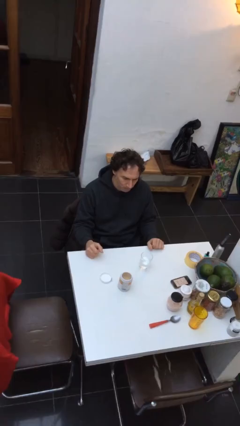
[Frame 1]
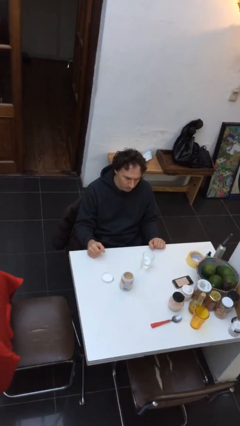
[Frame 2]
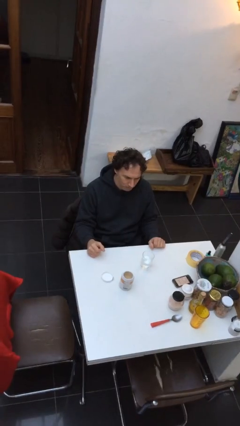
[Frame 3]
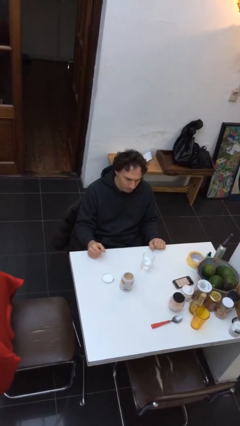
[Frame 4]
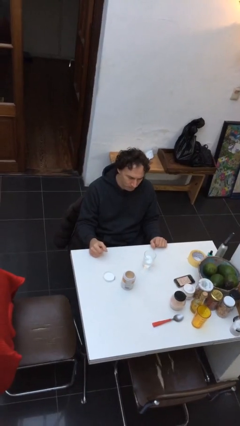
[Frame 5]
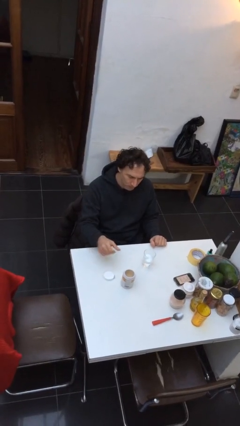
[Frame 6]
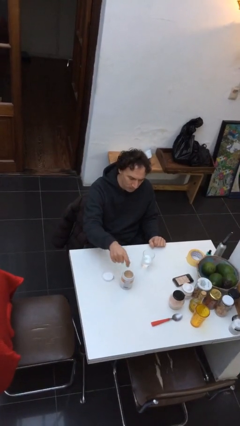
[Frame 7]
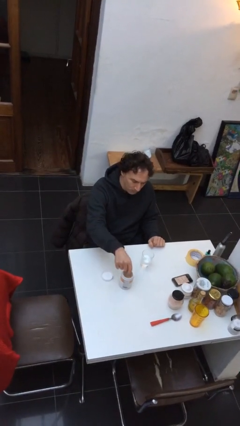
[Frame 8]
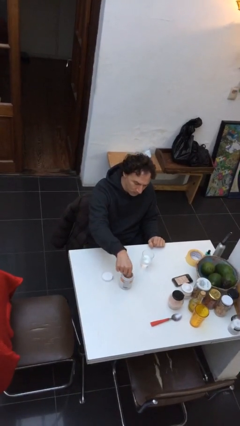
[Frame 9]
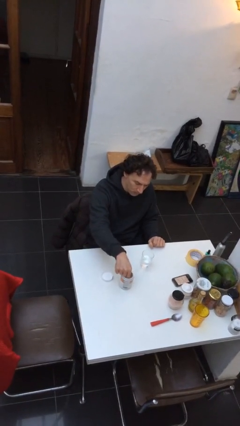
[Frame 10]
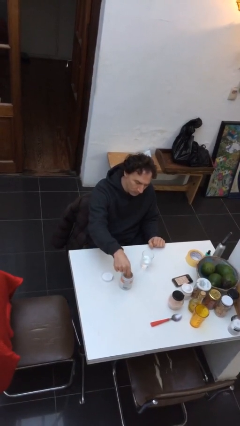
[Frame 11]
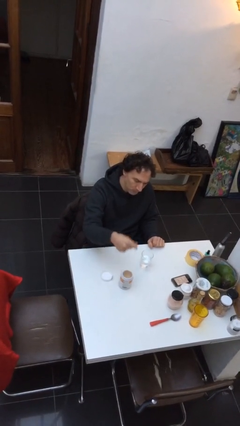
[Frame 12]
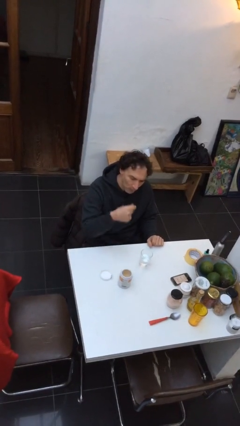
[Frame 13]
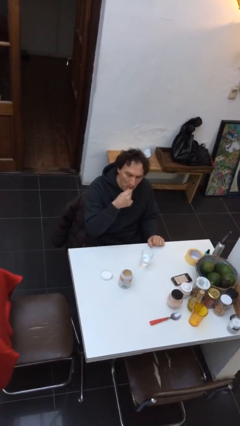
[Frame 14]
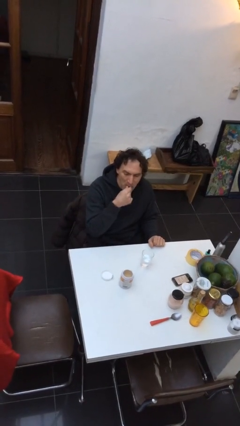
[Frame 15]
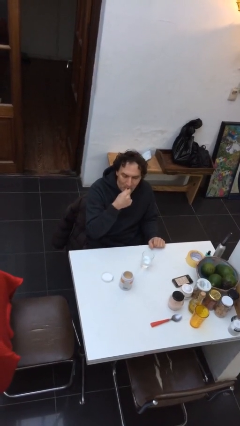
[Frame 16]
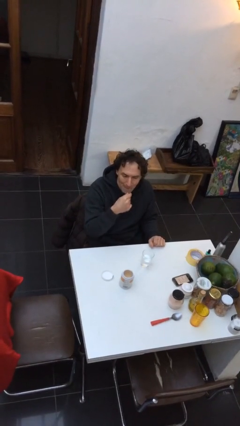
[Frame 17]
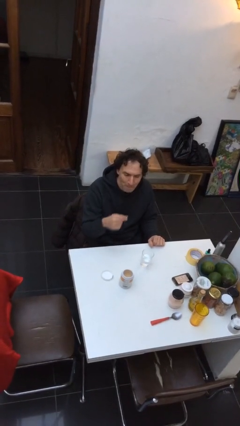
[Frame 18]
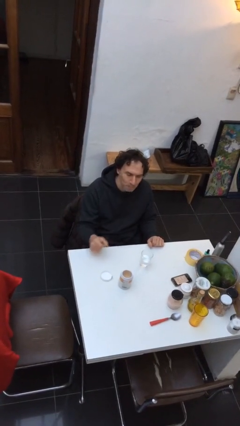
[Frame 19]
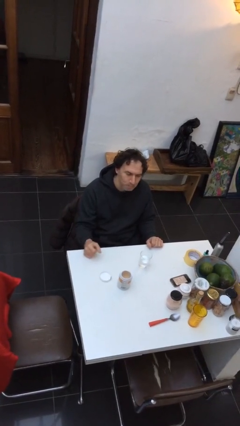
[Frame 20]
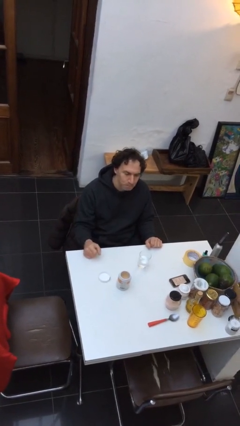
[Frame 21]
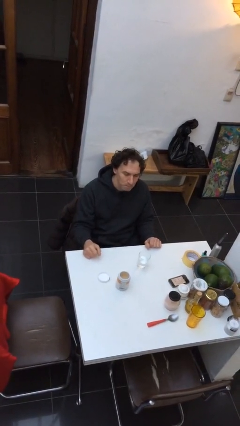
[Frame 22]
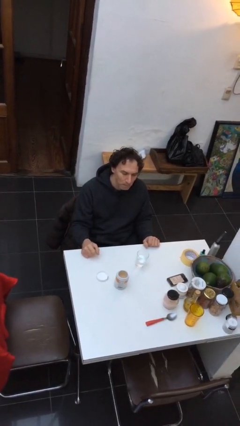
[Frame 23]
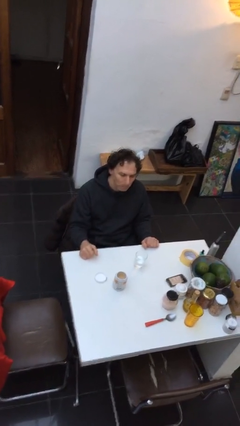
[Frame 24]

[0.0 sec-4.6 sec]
person takes medicine pills

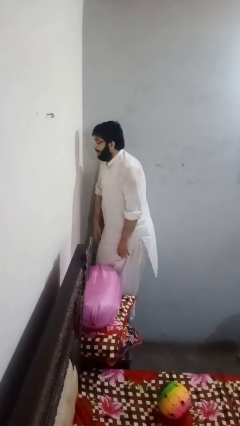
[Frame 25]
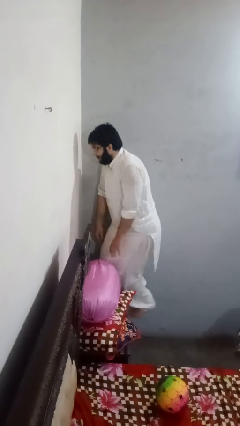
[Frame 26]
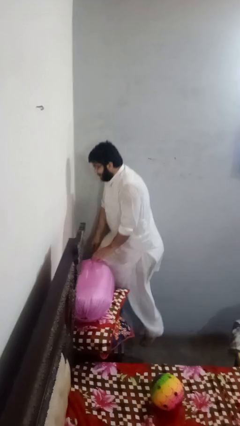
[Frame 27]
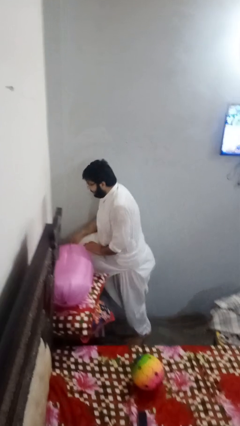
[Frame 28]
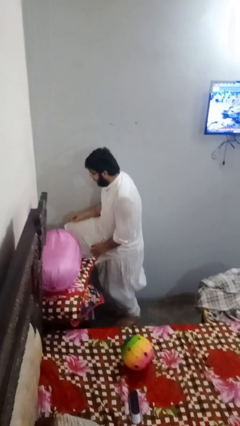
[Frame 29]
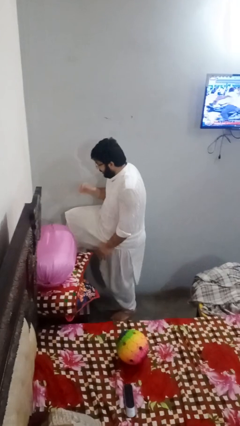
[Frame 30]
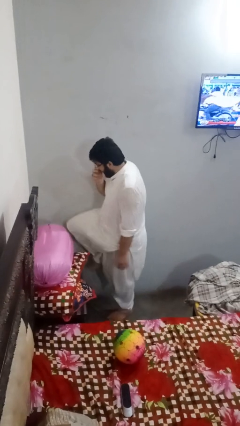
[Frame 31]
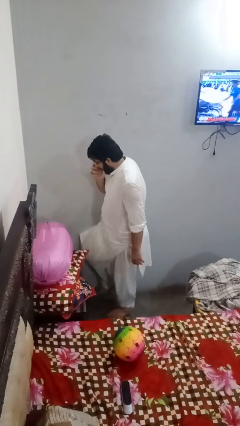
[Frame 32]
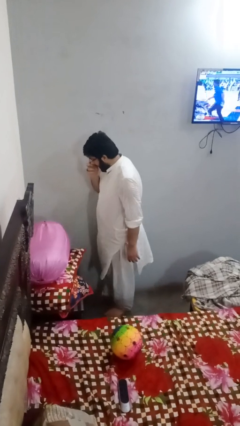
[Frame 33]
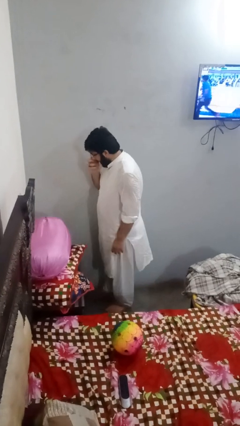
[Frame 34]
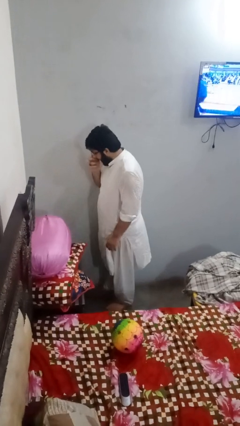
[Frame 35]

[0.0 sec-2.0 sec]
person climbs off table

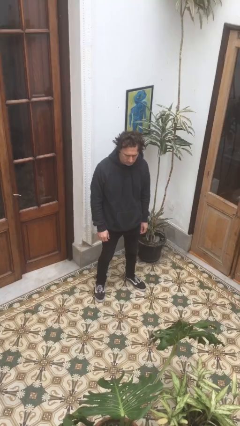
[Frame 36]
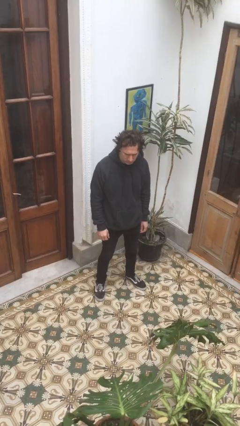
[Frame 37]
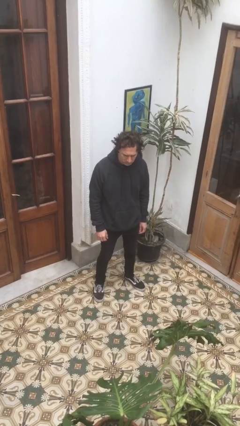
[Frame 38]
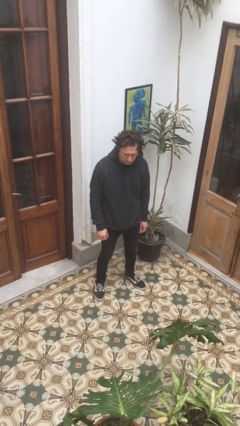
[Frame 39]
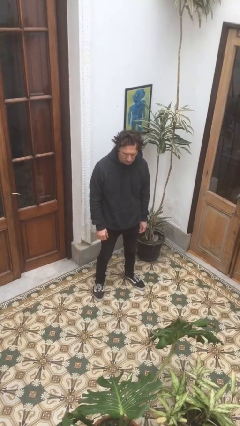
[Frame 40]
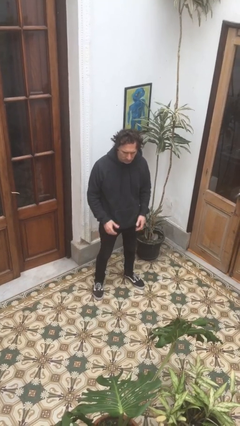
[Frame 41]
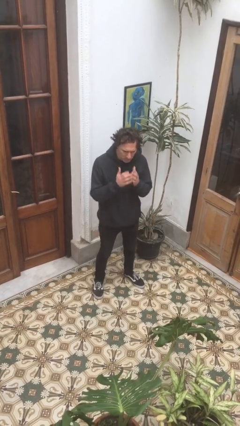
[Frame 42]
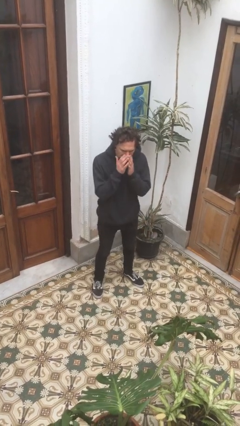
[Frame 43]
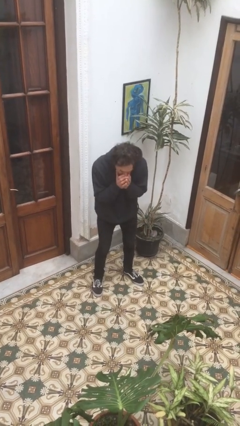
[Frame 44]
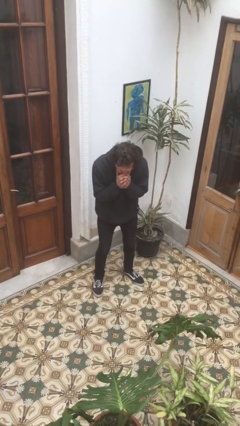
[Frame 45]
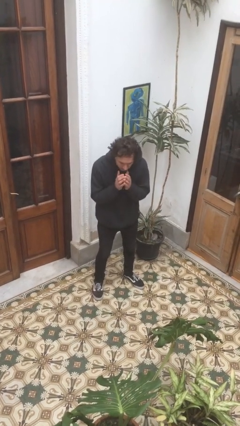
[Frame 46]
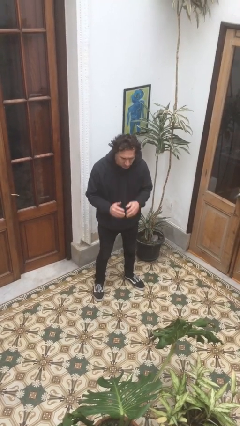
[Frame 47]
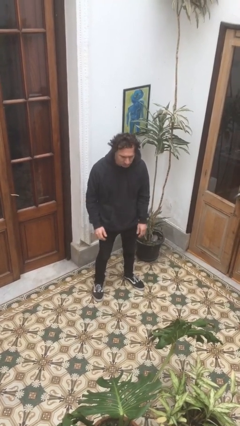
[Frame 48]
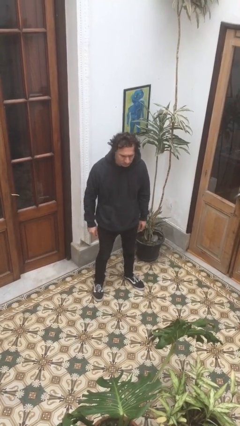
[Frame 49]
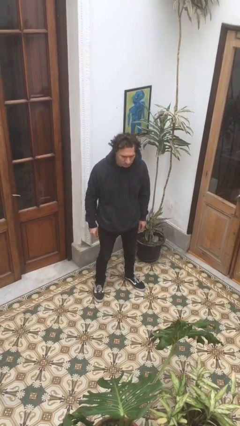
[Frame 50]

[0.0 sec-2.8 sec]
person sneezes into hand

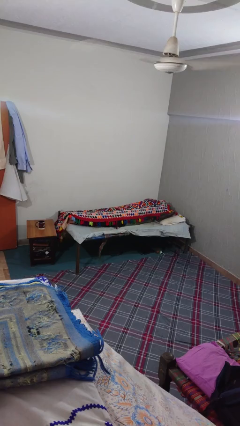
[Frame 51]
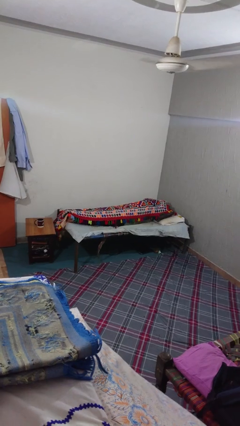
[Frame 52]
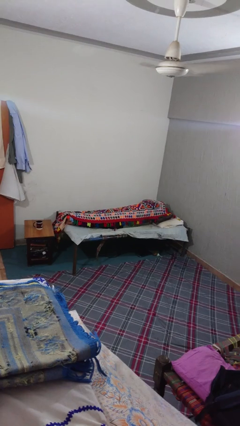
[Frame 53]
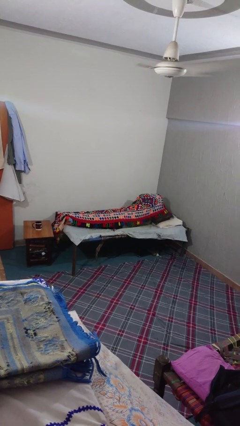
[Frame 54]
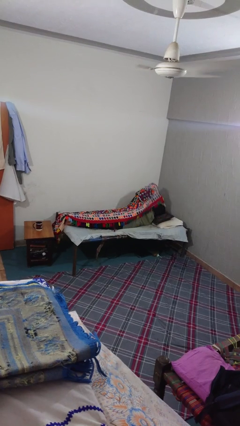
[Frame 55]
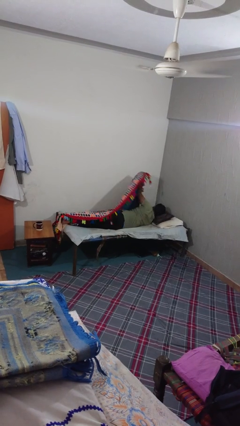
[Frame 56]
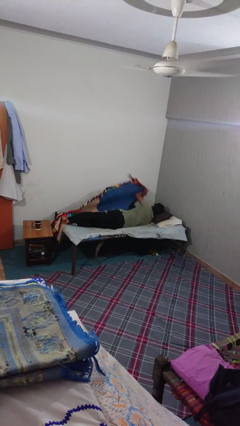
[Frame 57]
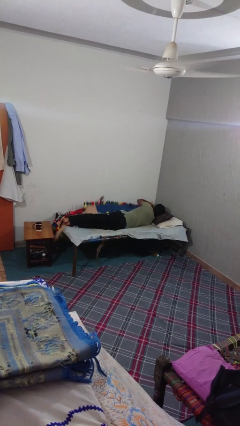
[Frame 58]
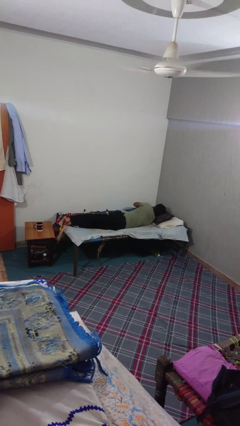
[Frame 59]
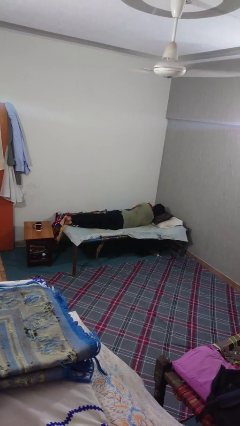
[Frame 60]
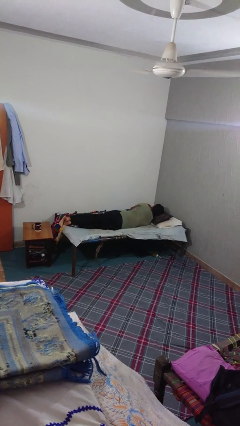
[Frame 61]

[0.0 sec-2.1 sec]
person uncovers with blanket

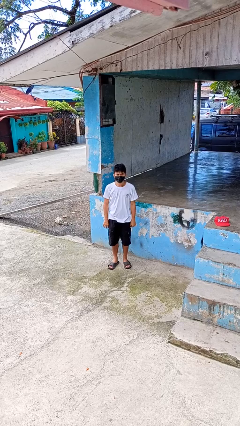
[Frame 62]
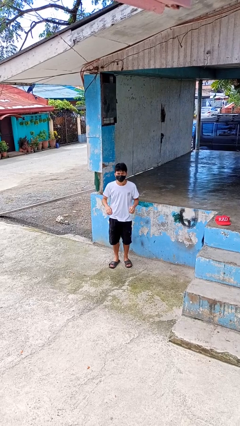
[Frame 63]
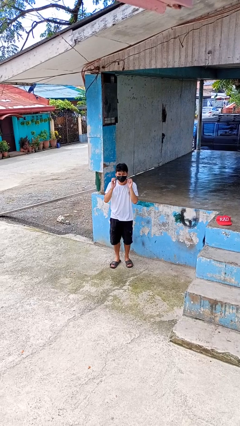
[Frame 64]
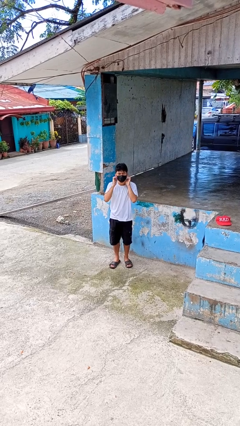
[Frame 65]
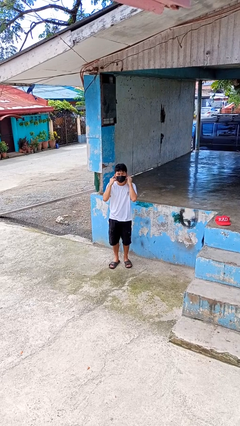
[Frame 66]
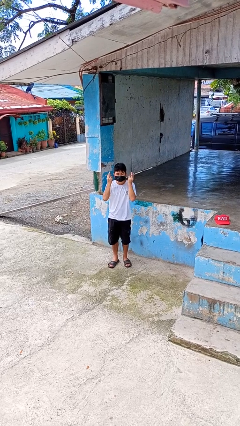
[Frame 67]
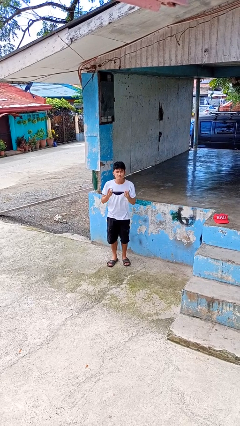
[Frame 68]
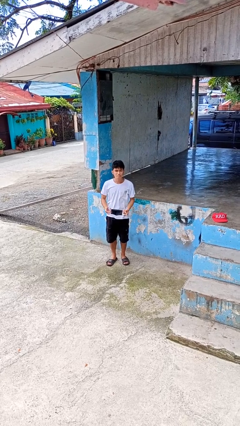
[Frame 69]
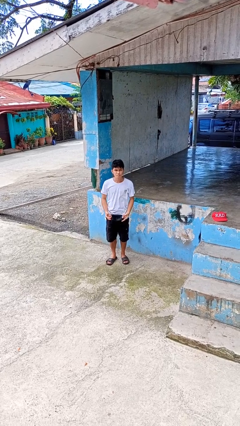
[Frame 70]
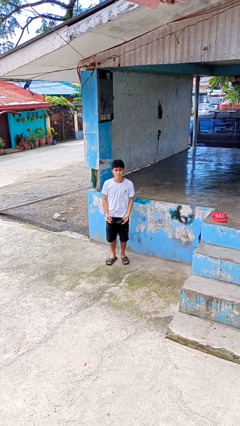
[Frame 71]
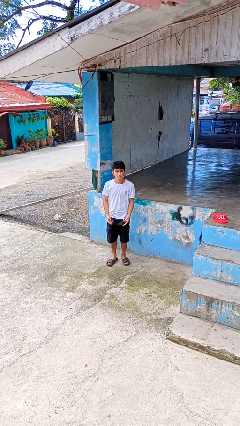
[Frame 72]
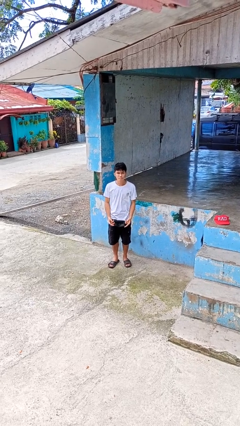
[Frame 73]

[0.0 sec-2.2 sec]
person takes off facemask

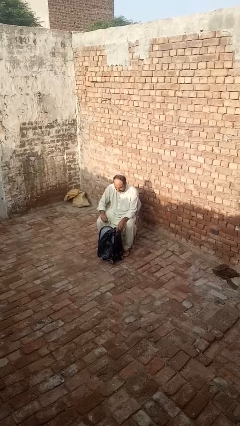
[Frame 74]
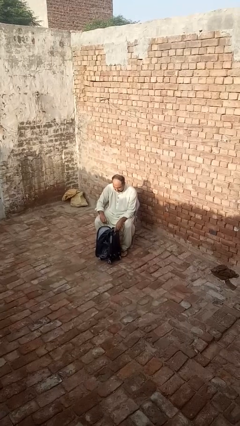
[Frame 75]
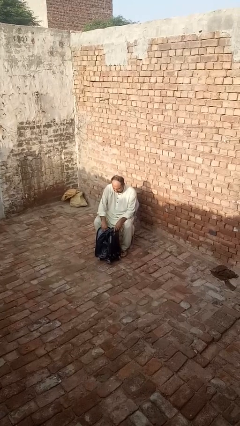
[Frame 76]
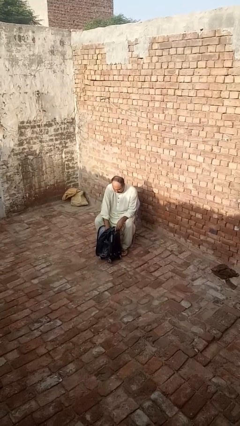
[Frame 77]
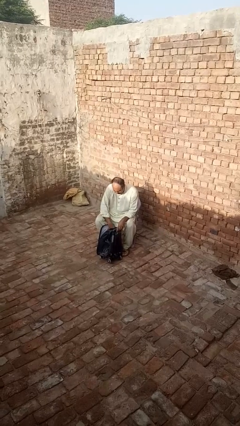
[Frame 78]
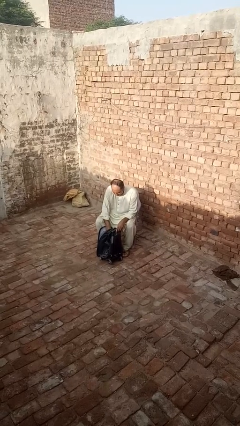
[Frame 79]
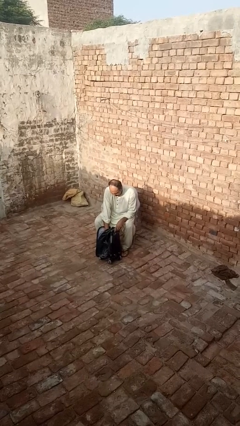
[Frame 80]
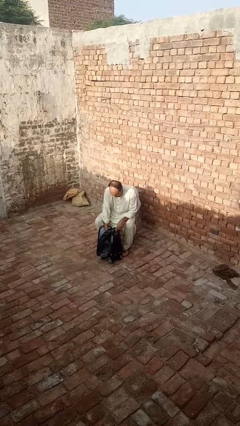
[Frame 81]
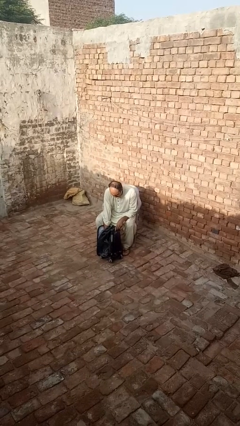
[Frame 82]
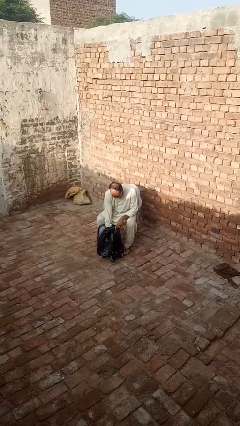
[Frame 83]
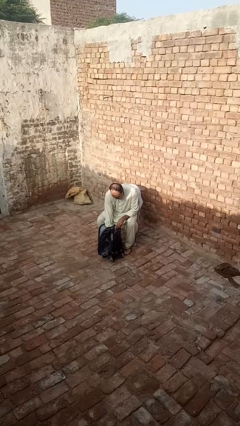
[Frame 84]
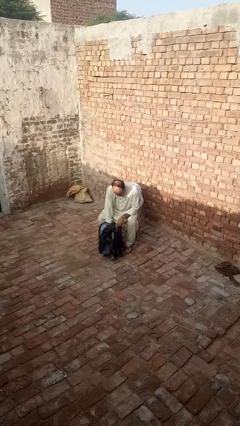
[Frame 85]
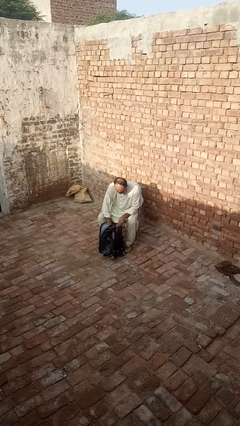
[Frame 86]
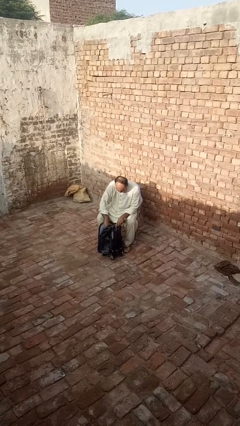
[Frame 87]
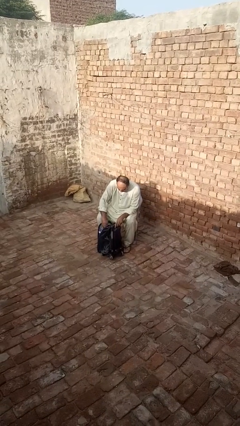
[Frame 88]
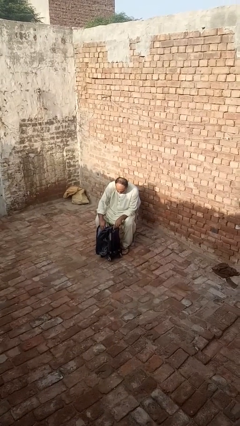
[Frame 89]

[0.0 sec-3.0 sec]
person searches in backpack

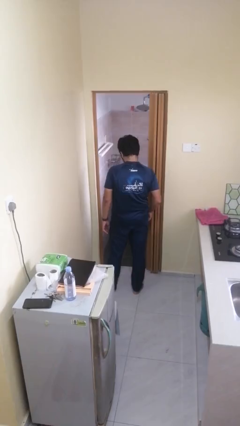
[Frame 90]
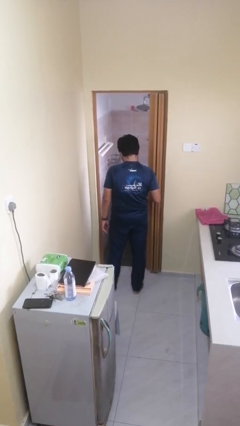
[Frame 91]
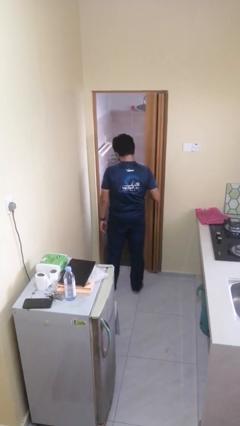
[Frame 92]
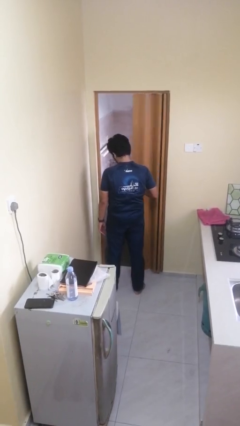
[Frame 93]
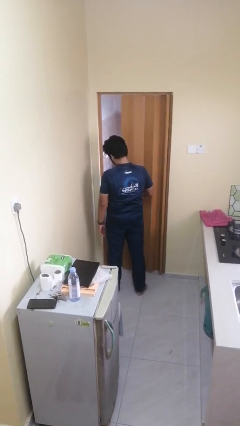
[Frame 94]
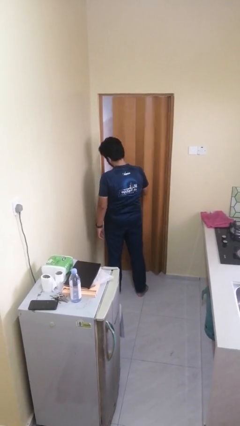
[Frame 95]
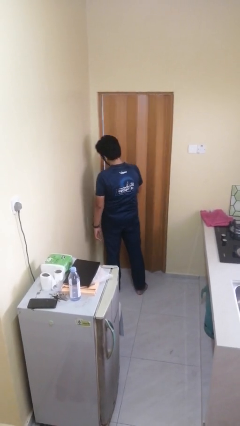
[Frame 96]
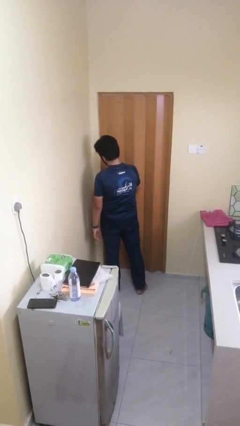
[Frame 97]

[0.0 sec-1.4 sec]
person closes sliding door
